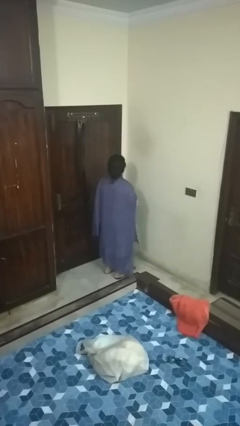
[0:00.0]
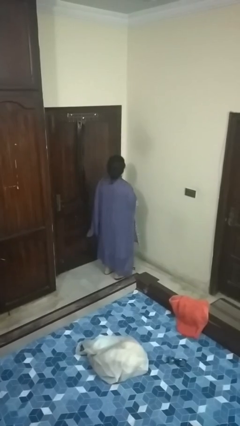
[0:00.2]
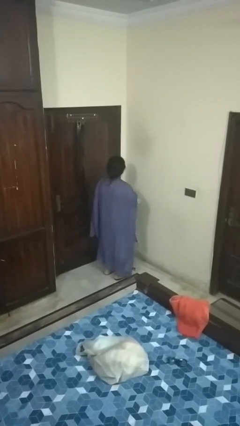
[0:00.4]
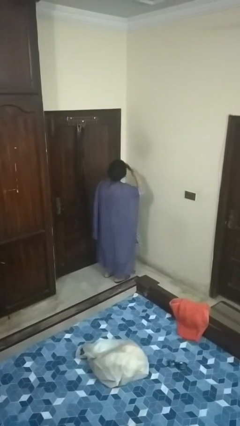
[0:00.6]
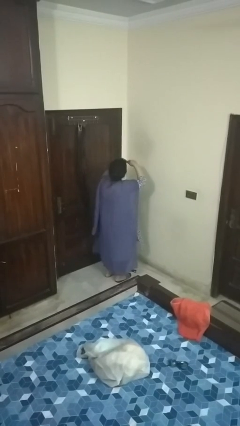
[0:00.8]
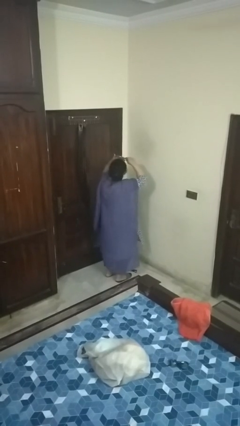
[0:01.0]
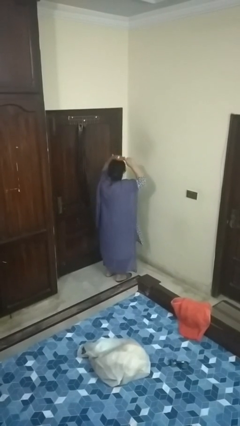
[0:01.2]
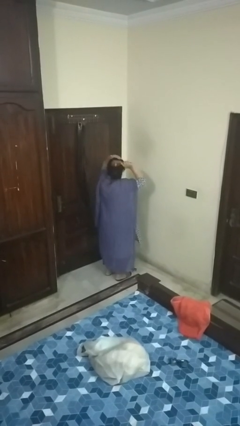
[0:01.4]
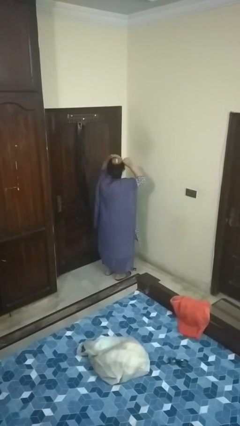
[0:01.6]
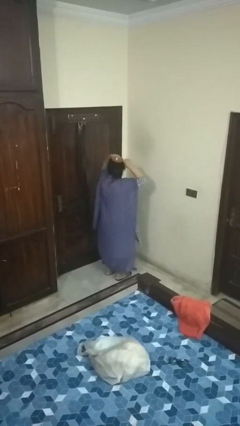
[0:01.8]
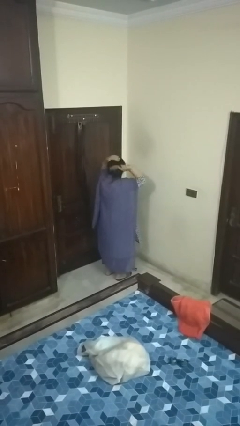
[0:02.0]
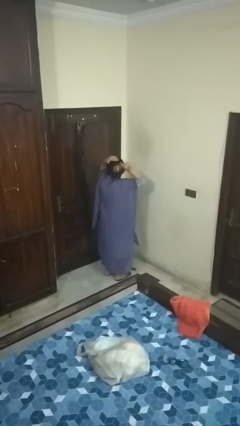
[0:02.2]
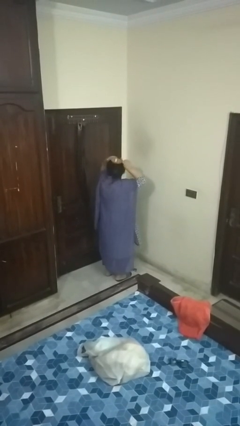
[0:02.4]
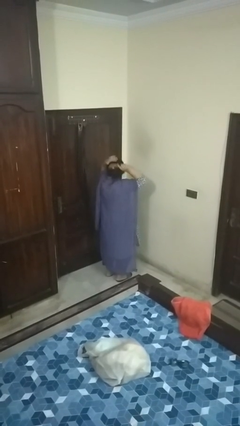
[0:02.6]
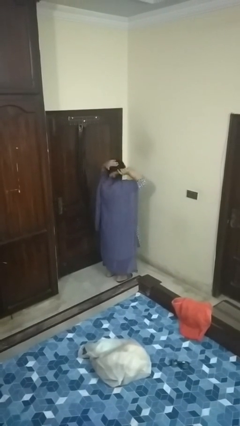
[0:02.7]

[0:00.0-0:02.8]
person brushes hair

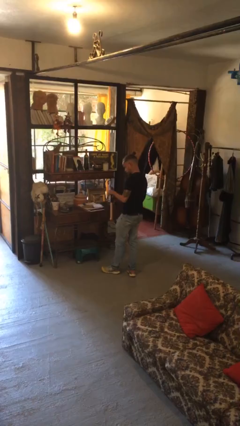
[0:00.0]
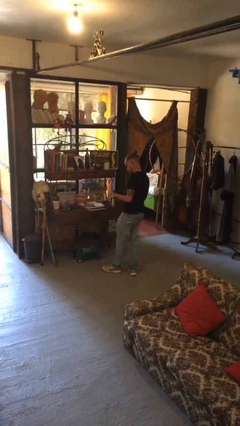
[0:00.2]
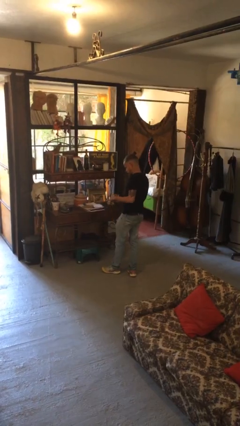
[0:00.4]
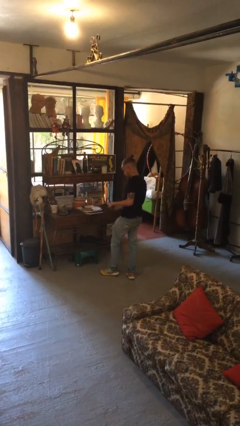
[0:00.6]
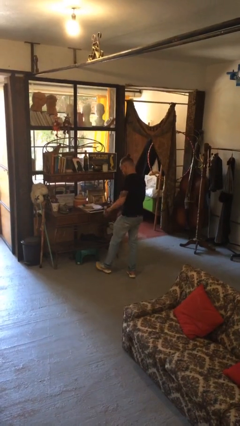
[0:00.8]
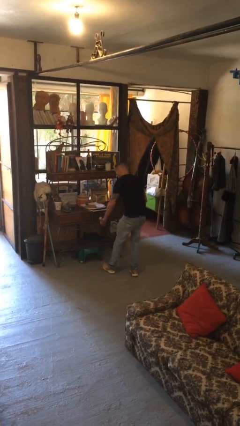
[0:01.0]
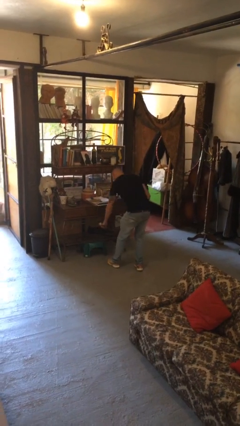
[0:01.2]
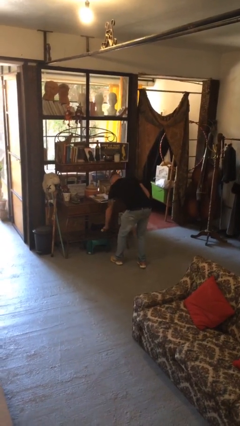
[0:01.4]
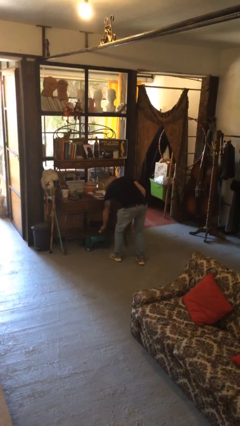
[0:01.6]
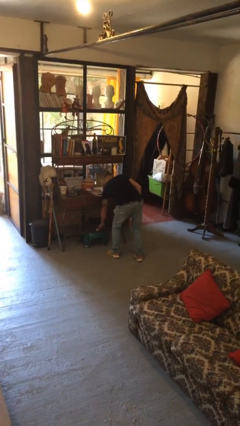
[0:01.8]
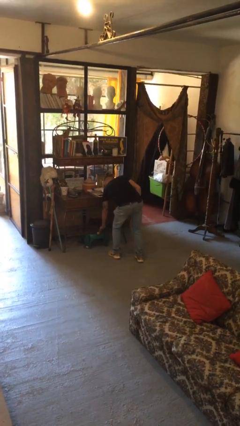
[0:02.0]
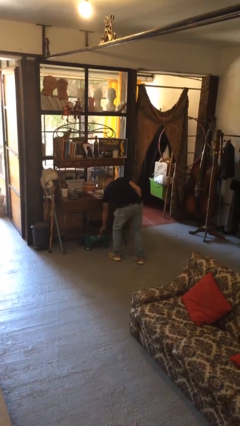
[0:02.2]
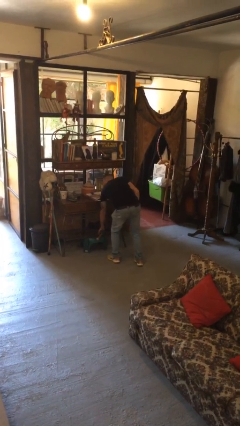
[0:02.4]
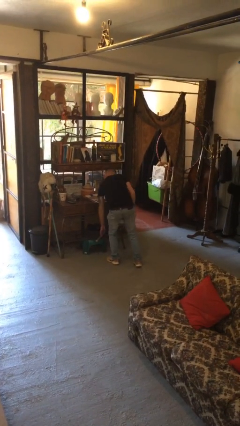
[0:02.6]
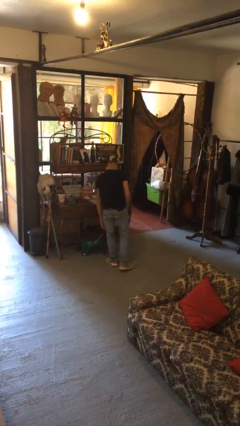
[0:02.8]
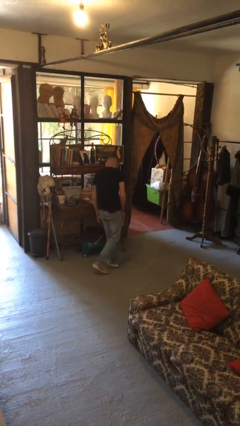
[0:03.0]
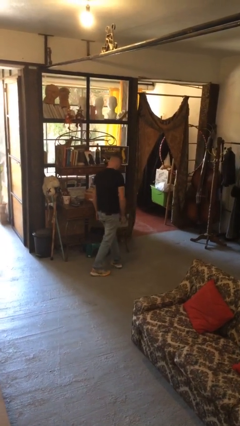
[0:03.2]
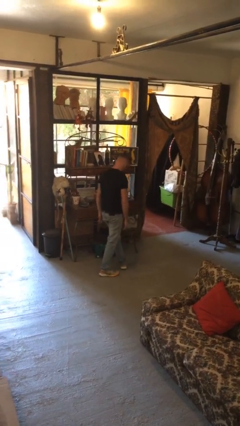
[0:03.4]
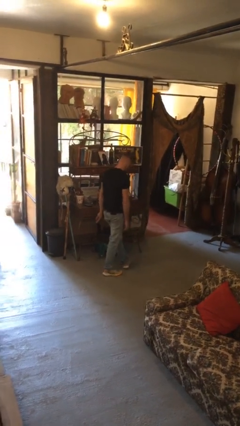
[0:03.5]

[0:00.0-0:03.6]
person puts down object into cabinet

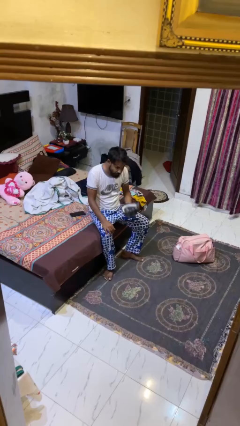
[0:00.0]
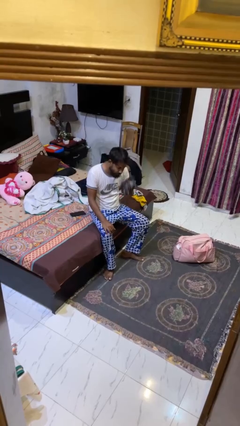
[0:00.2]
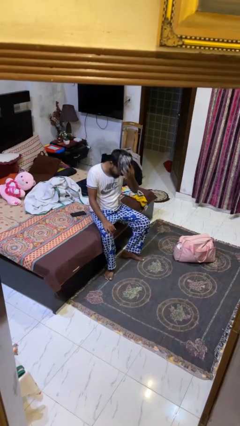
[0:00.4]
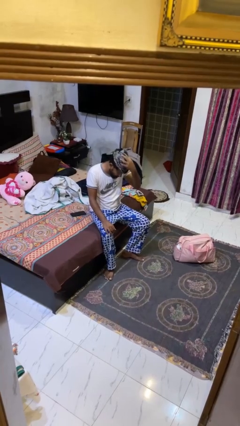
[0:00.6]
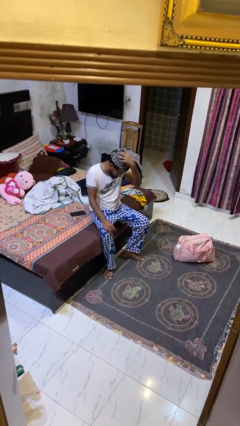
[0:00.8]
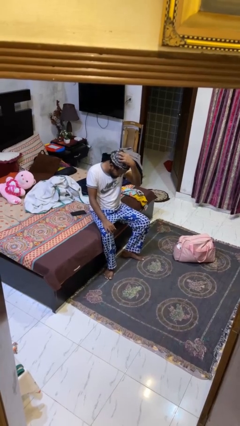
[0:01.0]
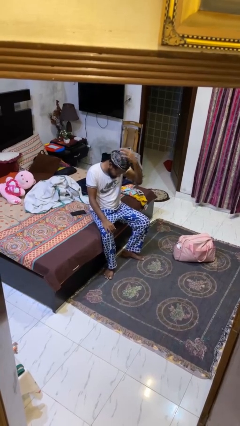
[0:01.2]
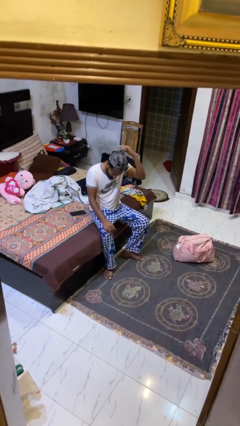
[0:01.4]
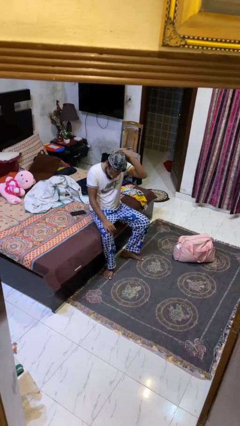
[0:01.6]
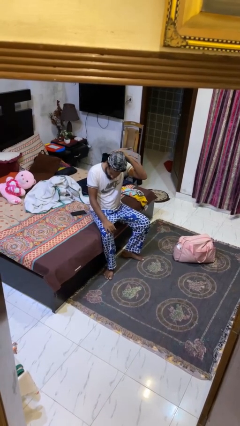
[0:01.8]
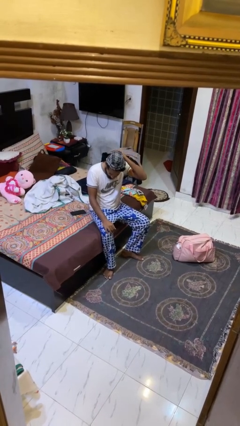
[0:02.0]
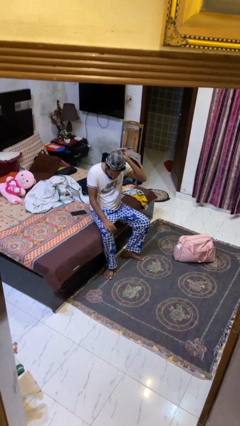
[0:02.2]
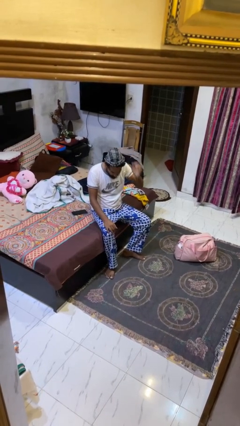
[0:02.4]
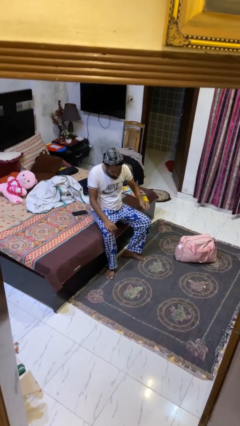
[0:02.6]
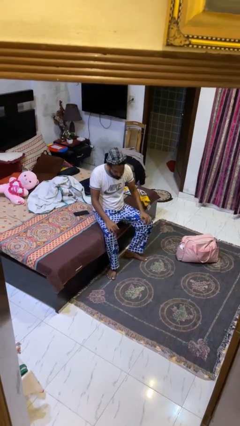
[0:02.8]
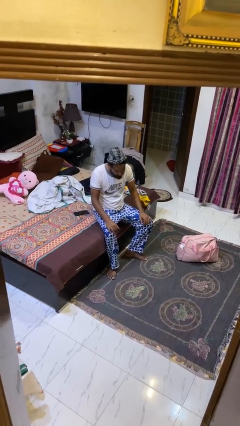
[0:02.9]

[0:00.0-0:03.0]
person puts on hat

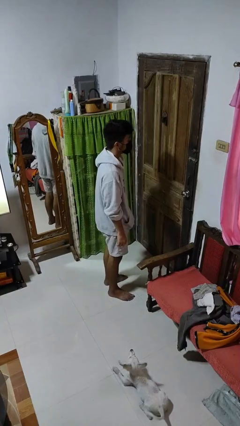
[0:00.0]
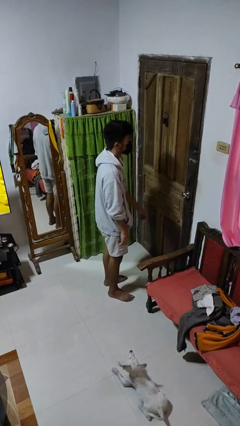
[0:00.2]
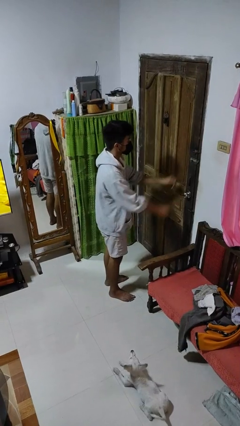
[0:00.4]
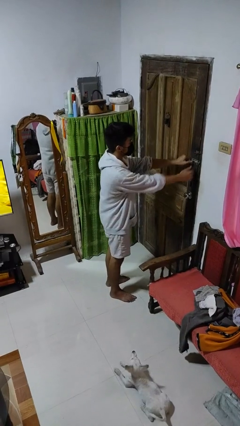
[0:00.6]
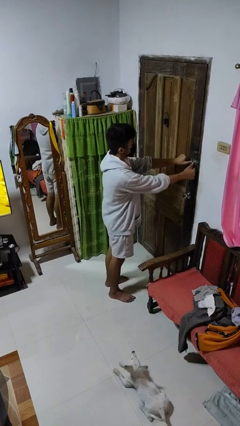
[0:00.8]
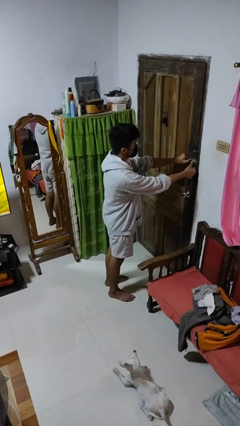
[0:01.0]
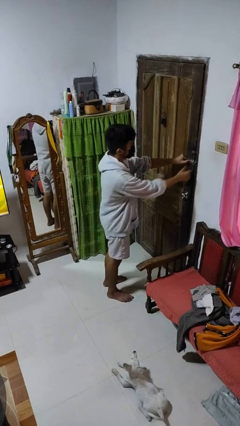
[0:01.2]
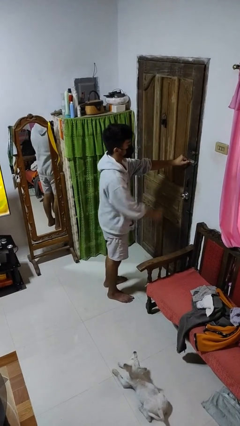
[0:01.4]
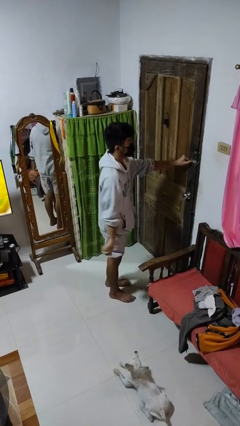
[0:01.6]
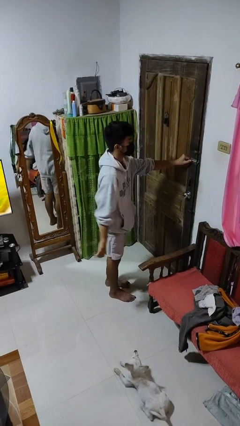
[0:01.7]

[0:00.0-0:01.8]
person unlocks door with keys

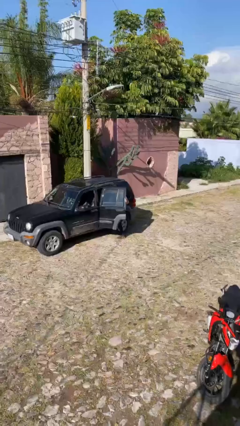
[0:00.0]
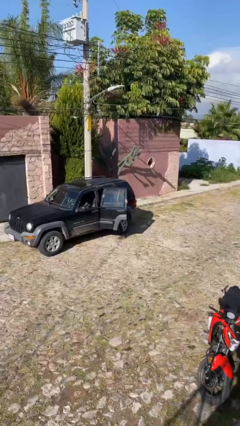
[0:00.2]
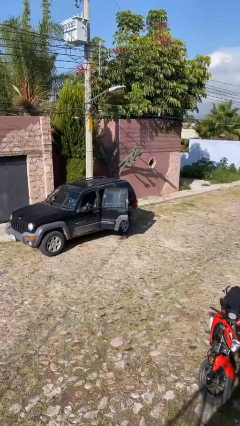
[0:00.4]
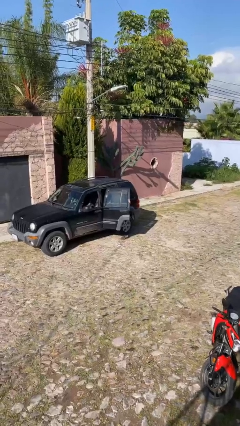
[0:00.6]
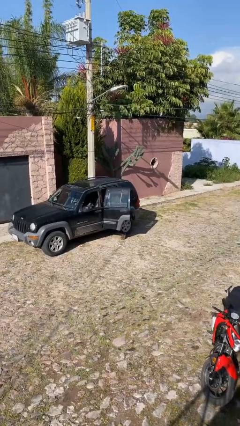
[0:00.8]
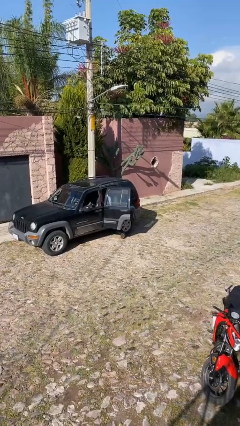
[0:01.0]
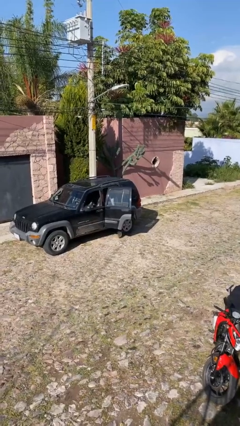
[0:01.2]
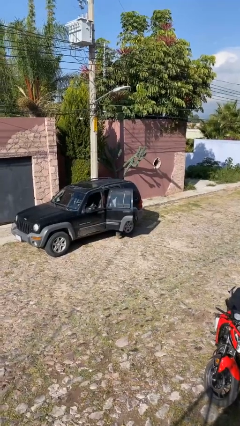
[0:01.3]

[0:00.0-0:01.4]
person enters car

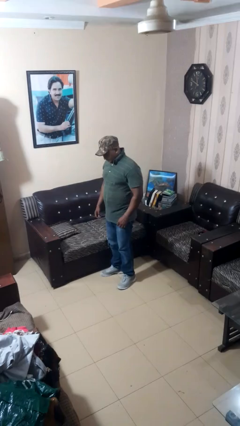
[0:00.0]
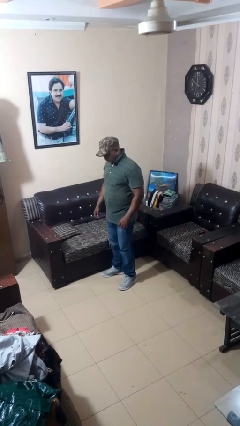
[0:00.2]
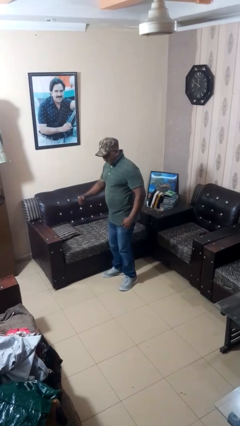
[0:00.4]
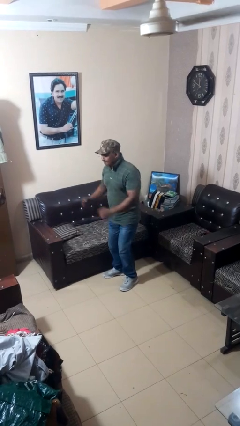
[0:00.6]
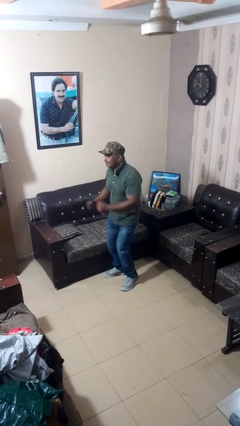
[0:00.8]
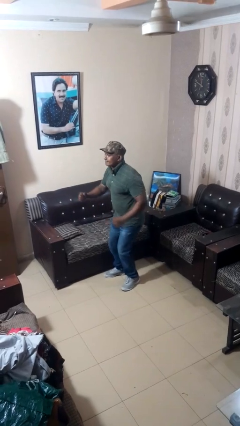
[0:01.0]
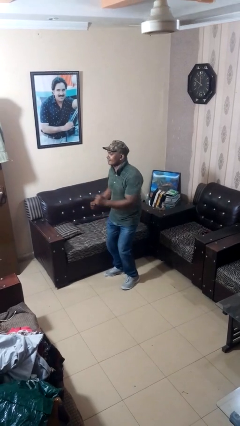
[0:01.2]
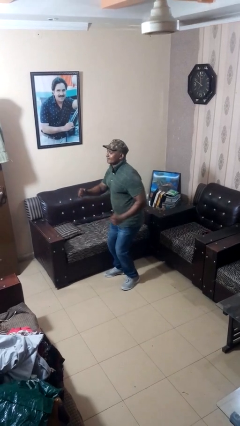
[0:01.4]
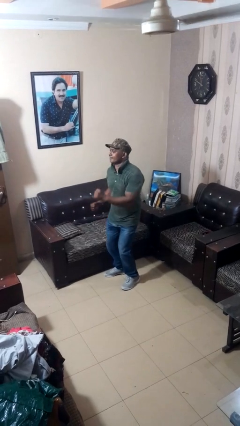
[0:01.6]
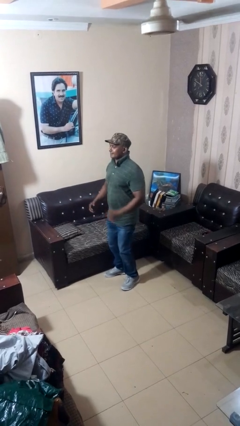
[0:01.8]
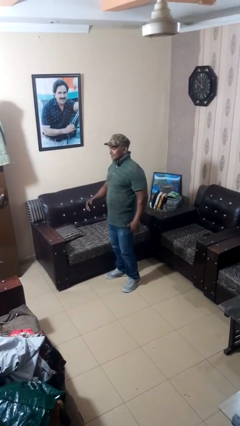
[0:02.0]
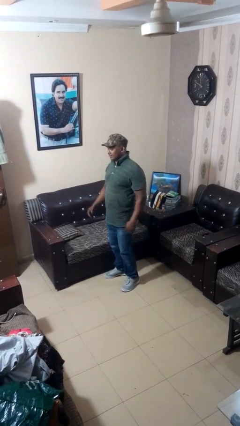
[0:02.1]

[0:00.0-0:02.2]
person wiggles hips

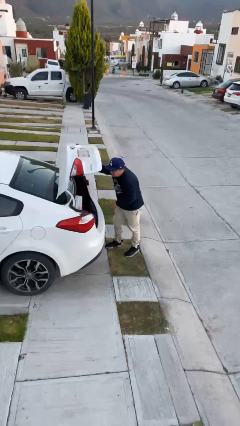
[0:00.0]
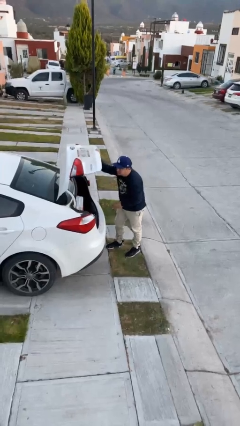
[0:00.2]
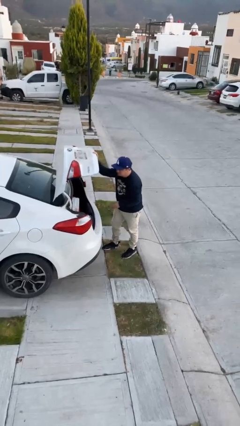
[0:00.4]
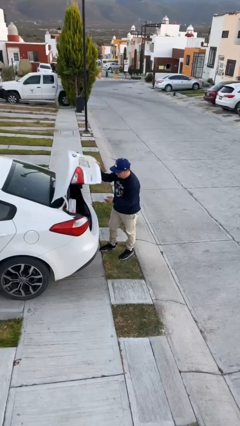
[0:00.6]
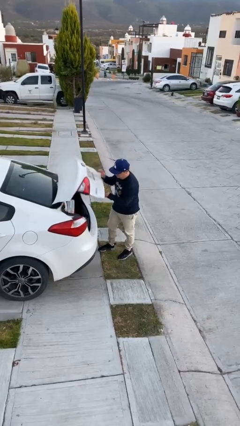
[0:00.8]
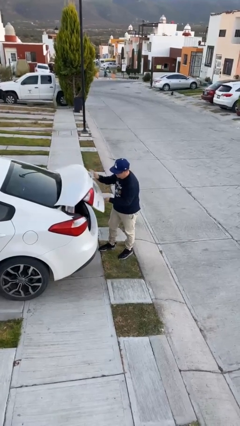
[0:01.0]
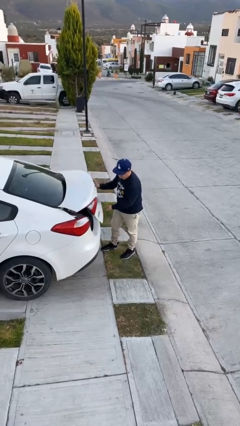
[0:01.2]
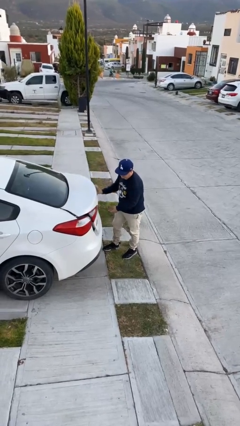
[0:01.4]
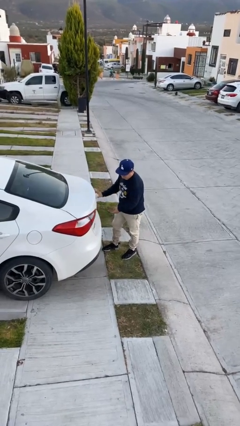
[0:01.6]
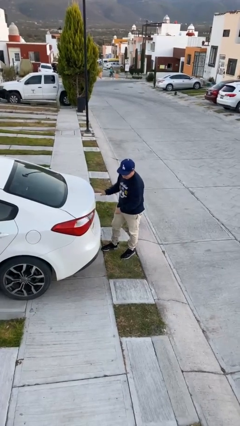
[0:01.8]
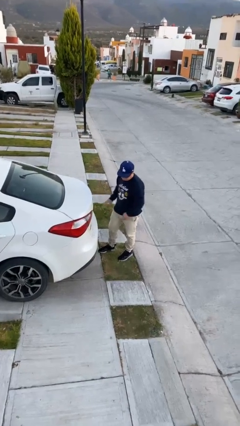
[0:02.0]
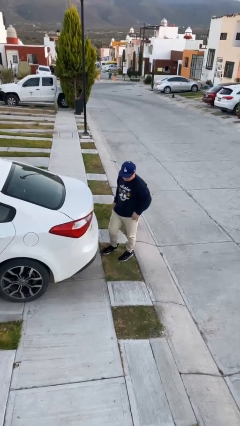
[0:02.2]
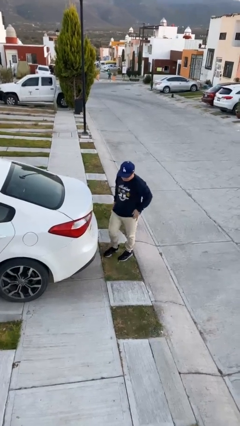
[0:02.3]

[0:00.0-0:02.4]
person closes car trunk
